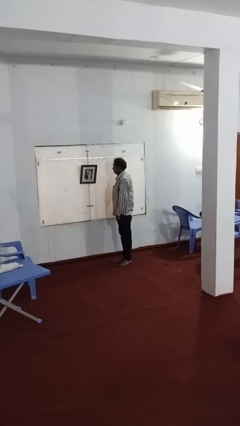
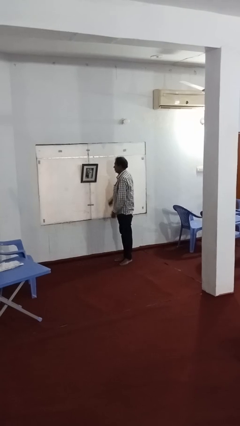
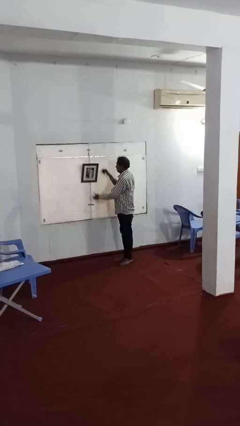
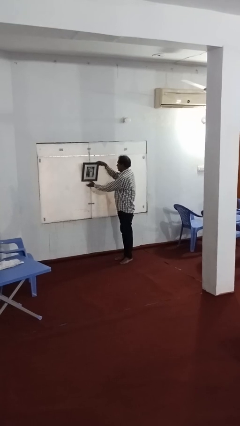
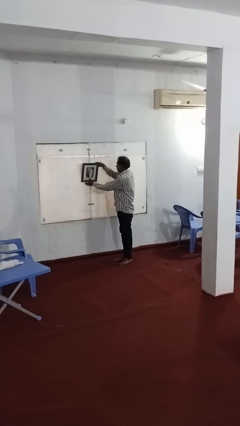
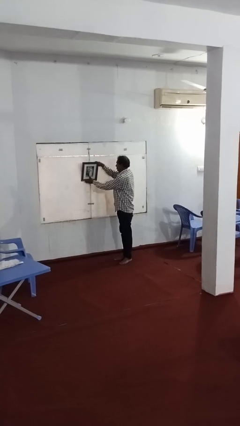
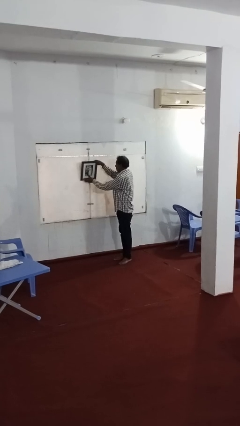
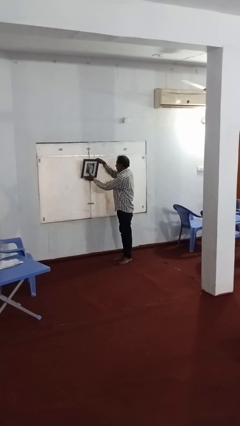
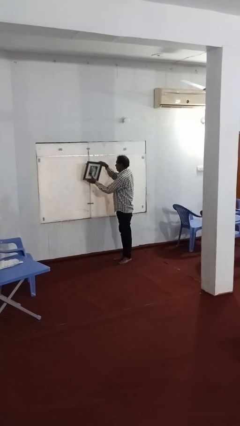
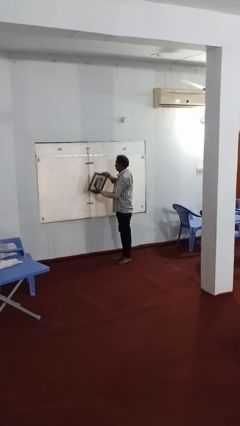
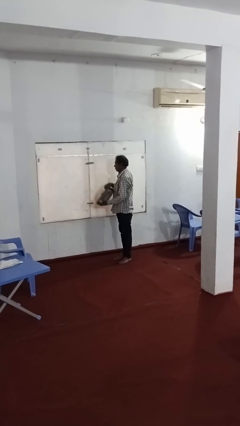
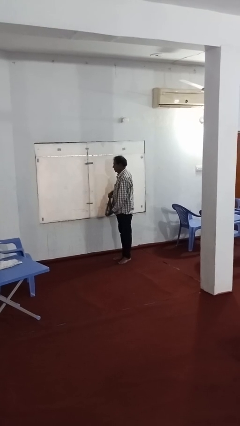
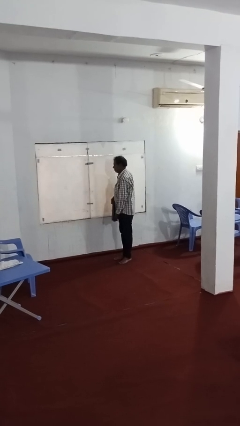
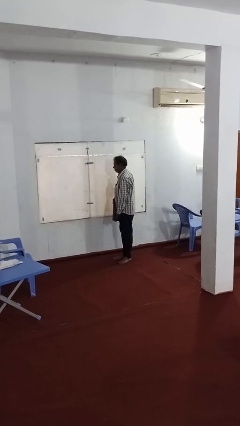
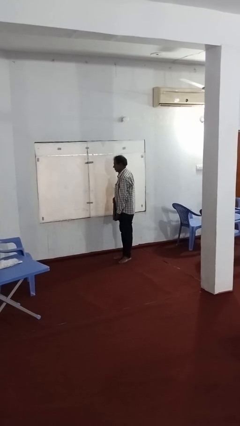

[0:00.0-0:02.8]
person takes down picture frame

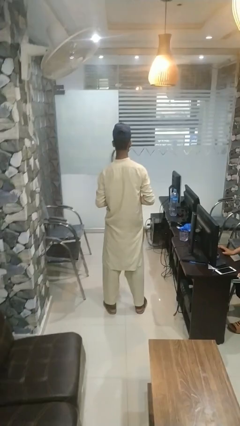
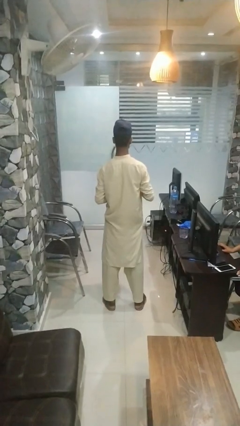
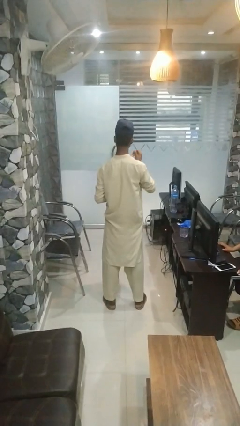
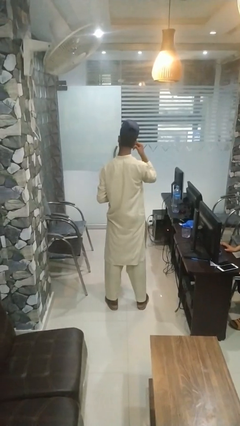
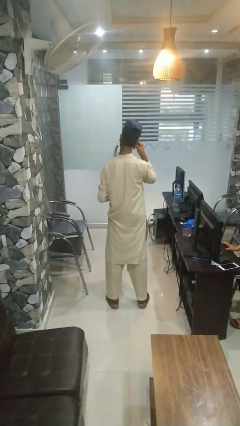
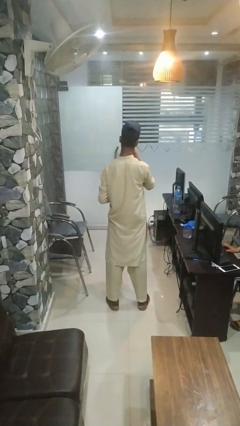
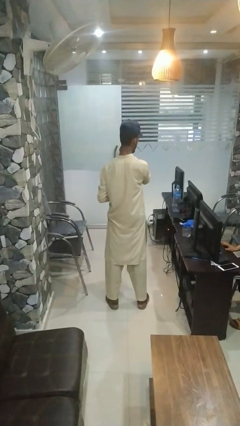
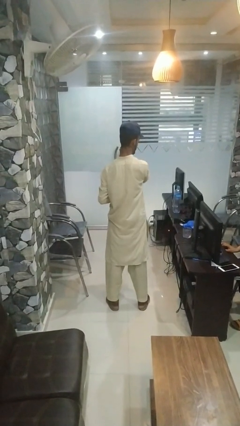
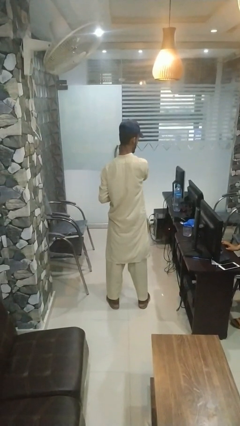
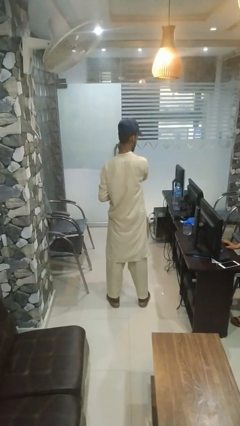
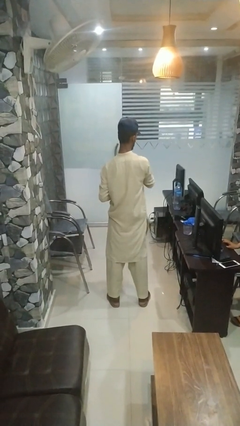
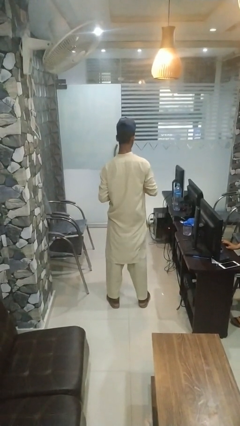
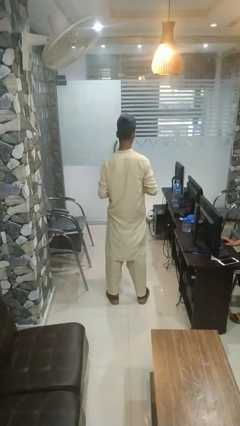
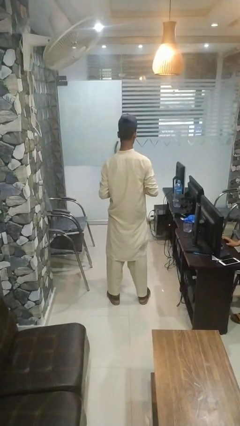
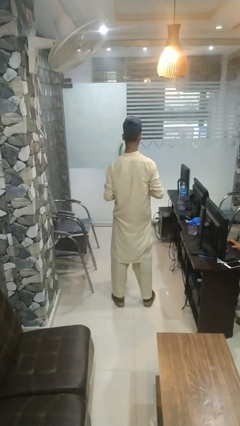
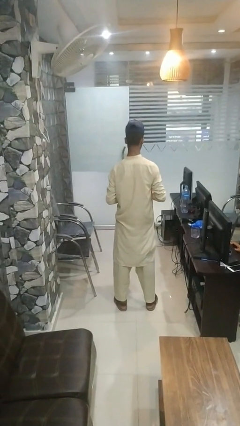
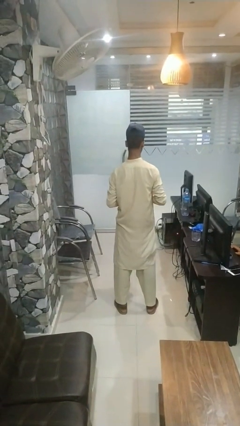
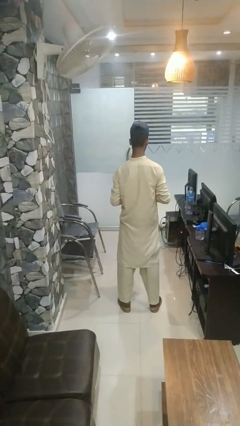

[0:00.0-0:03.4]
person takes off headphones

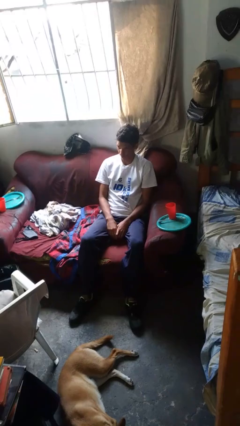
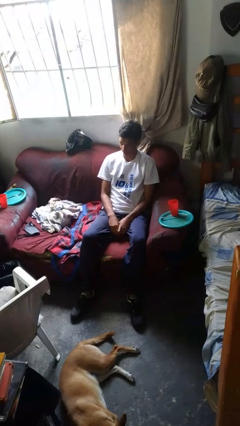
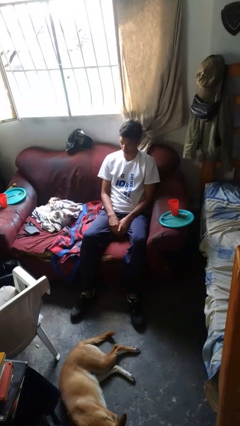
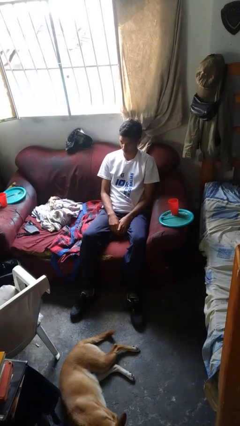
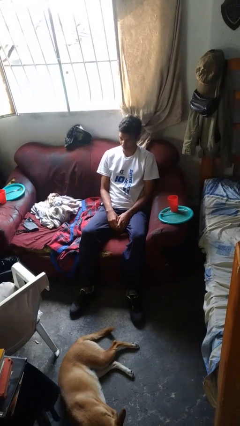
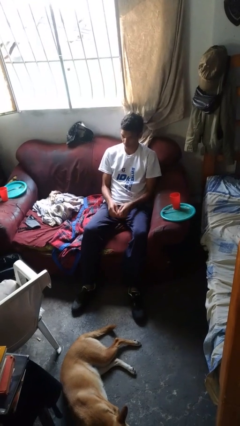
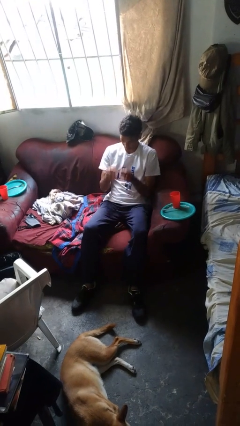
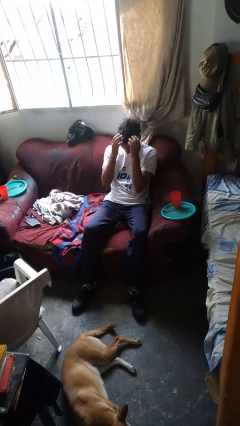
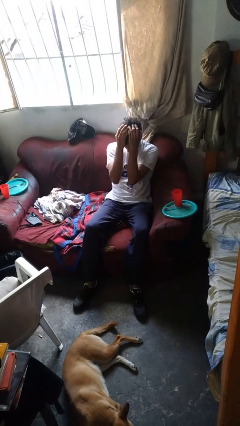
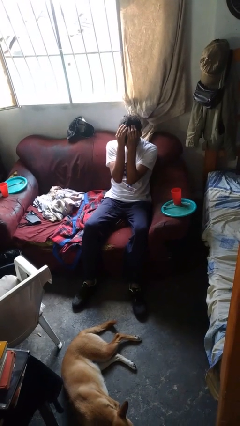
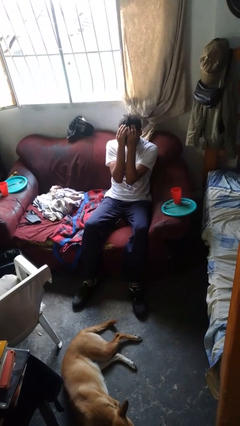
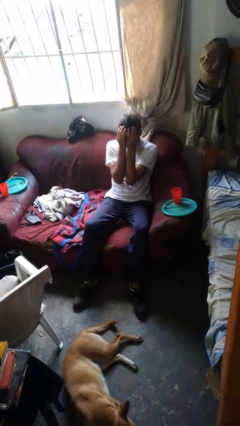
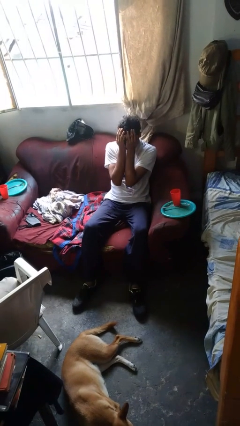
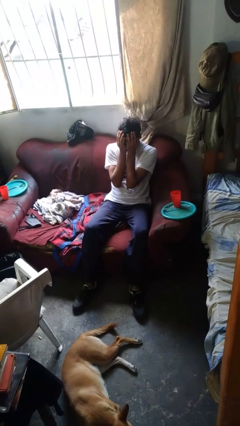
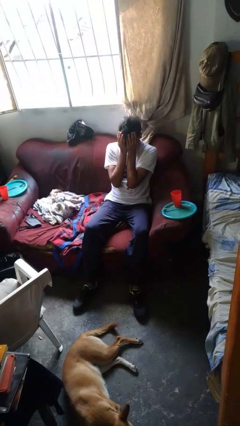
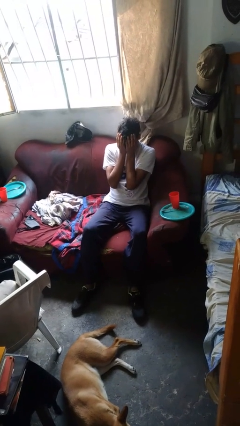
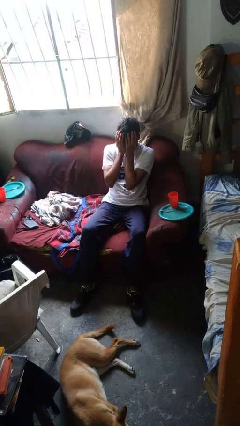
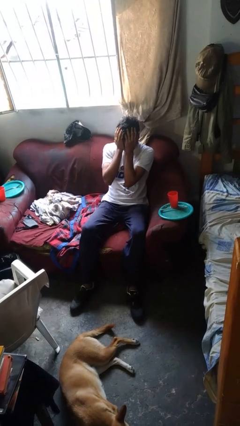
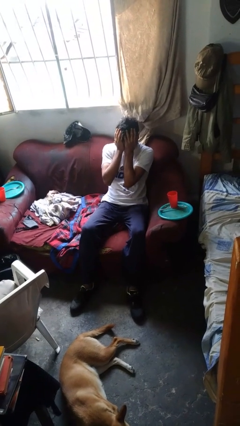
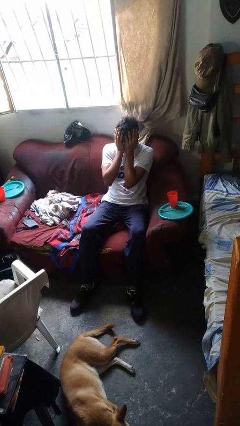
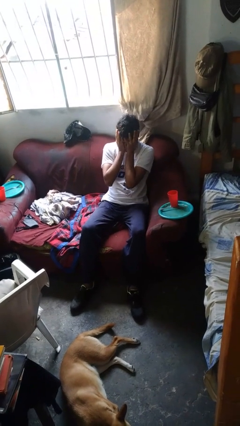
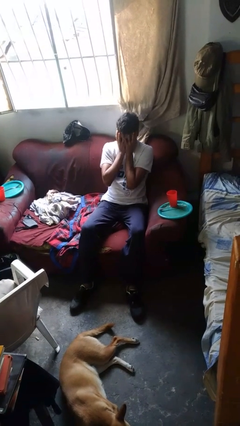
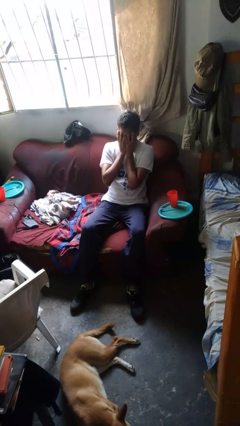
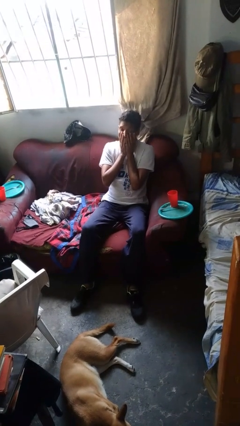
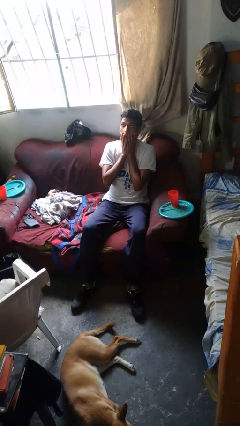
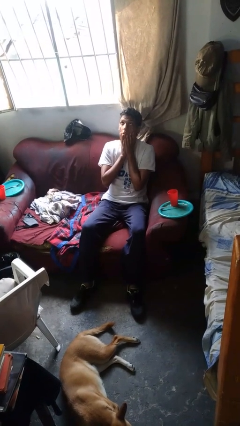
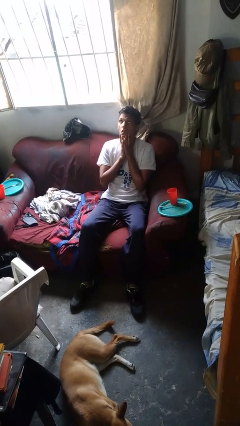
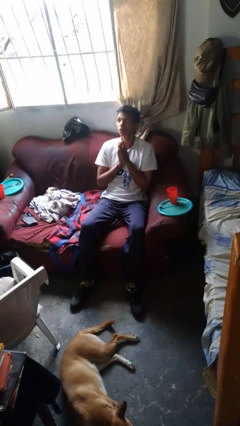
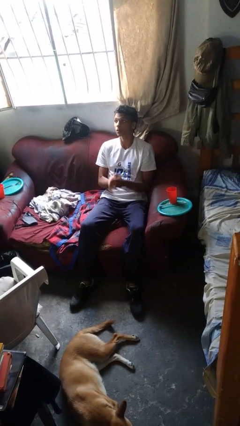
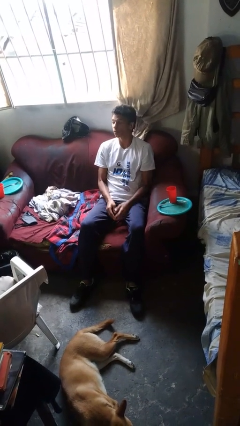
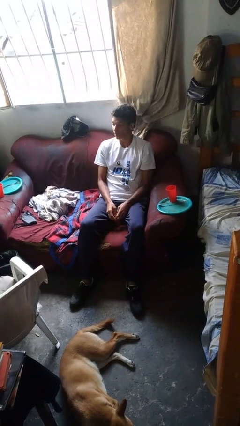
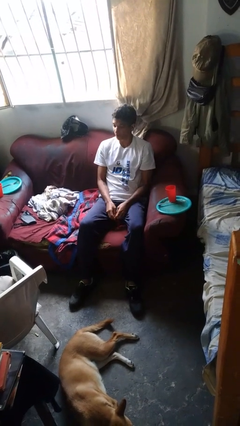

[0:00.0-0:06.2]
person covers face with hands

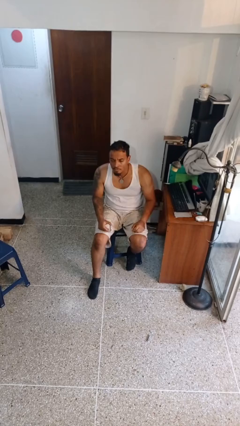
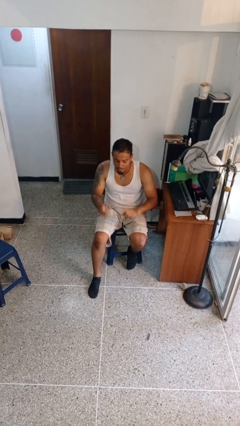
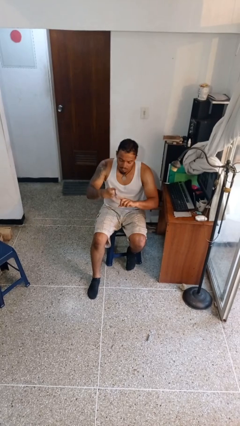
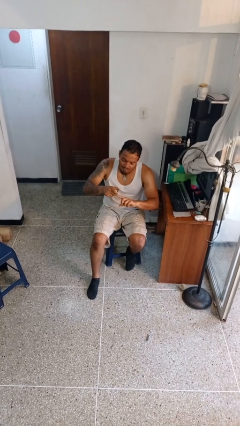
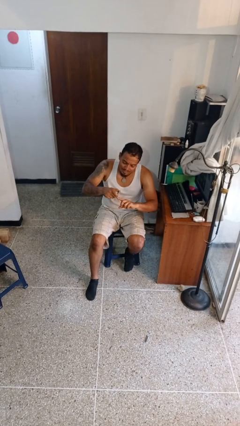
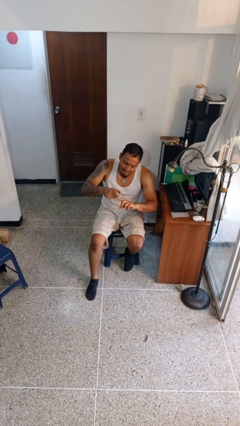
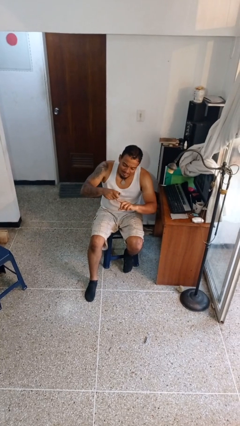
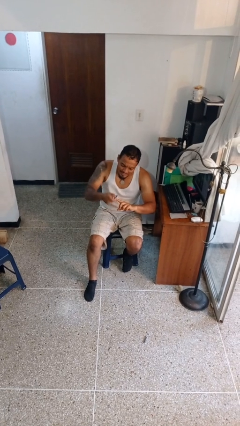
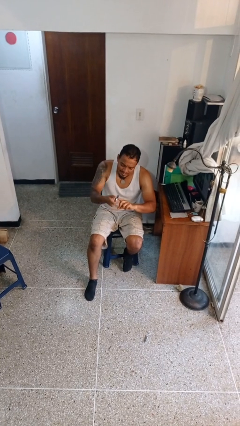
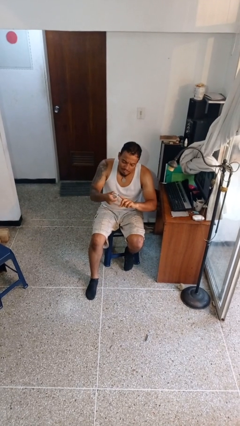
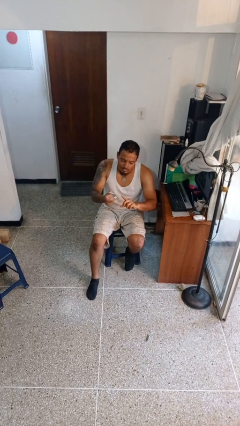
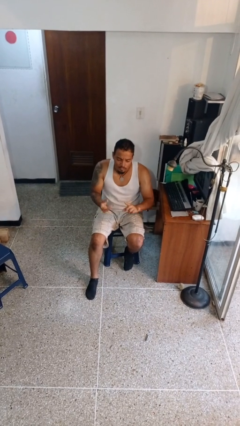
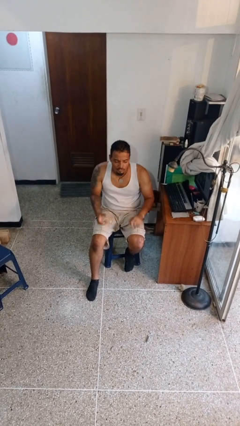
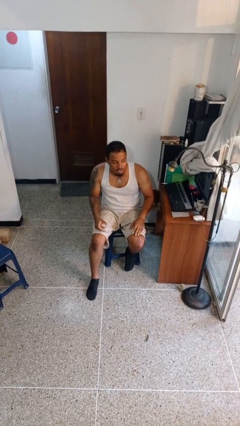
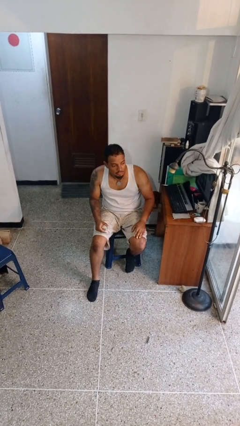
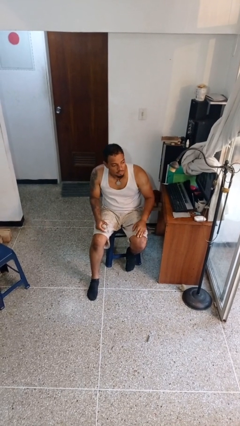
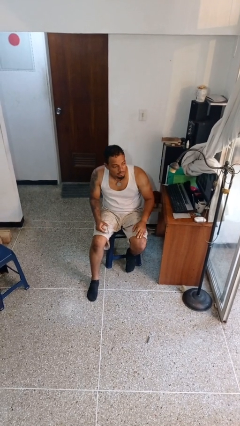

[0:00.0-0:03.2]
person clips fingernails

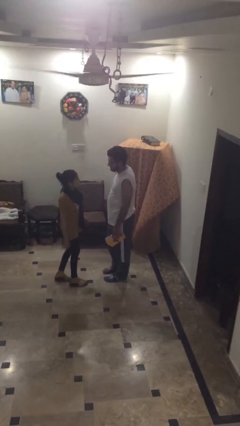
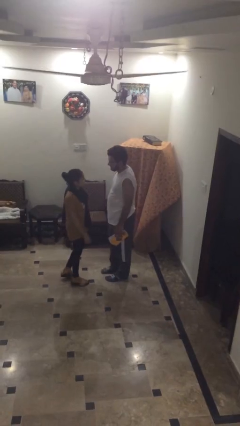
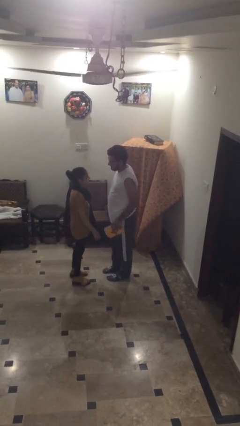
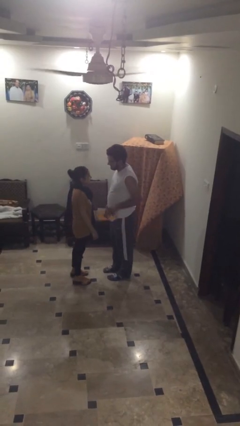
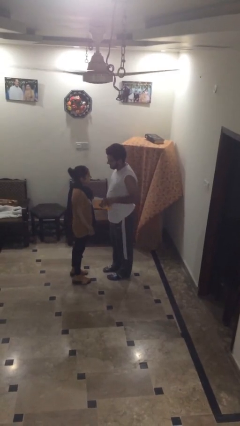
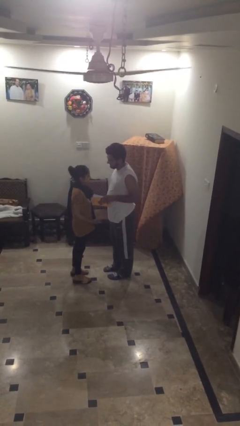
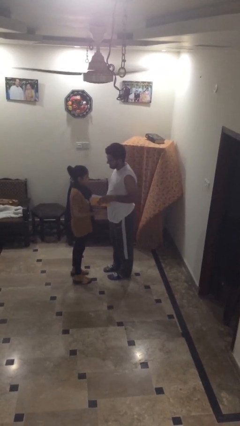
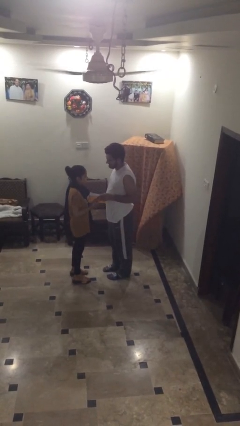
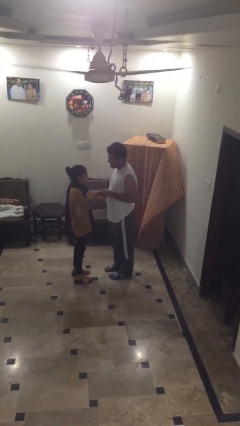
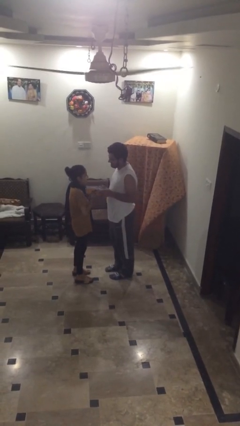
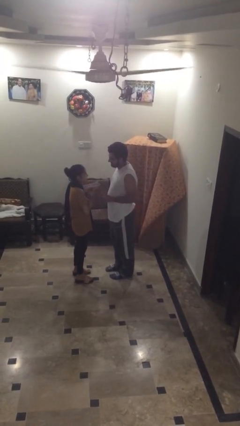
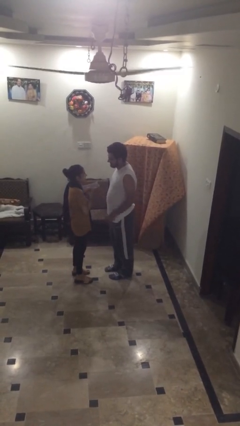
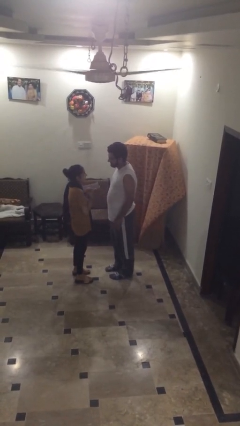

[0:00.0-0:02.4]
person transfers object to person
